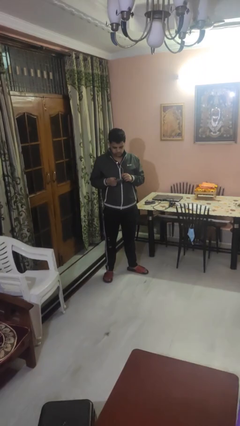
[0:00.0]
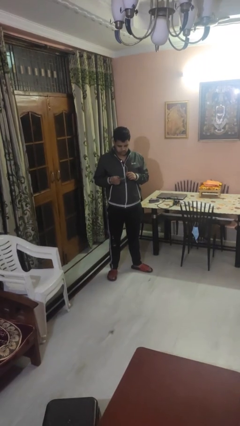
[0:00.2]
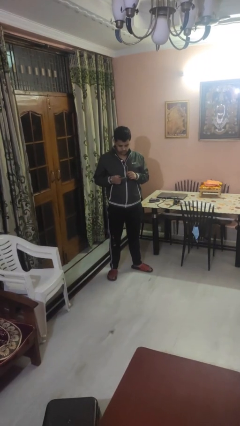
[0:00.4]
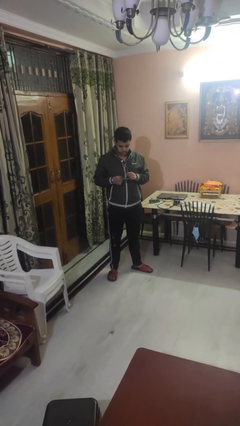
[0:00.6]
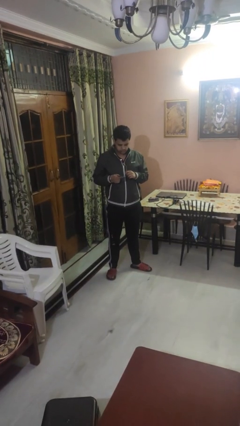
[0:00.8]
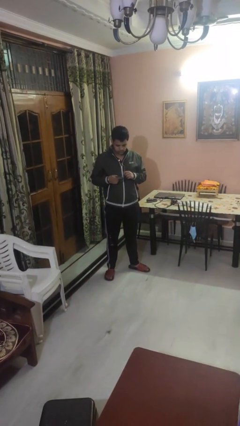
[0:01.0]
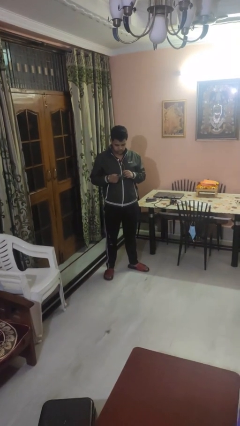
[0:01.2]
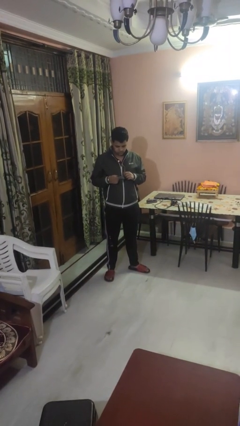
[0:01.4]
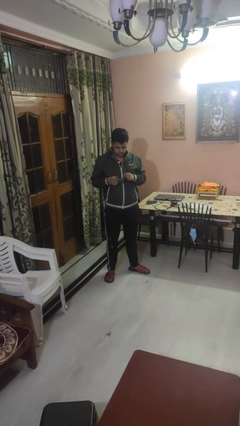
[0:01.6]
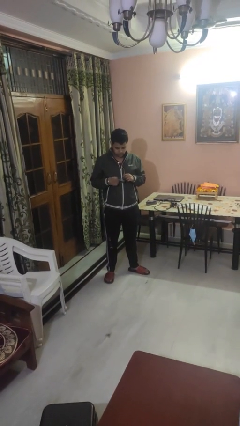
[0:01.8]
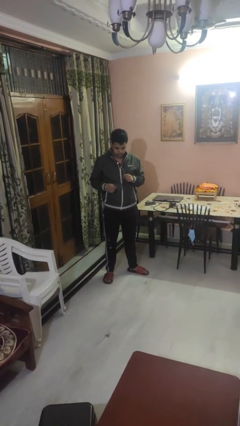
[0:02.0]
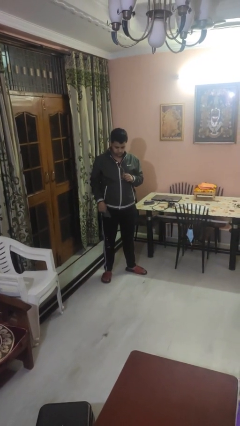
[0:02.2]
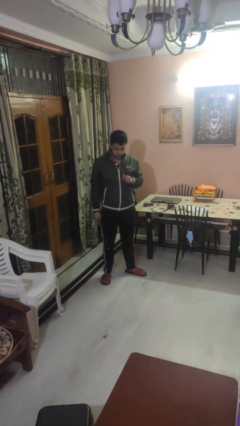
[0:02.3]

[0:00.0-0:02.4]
person cleans eyeglasses

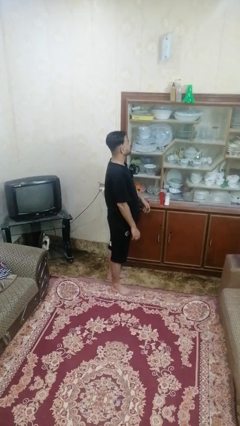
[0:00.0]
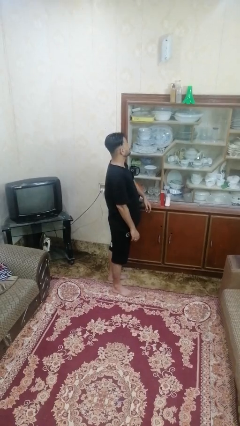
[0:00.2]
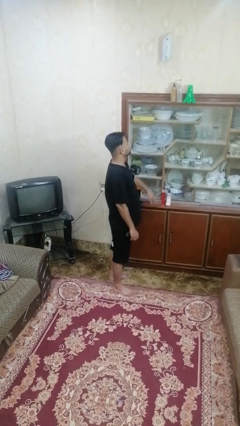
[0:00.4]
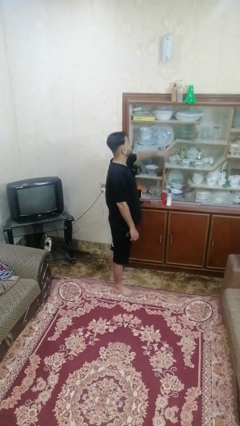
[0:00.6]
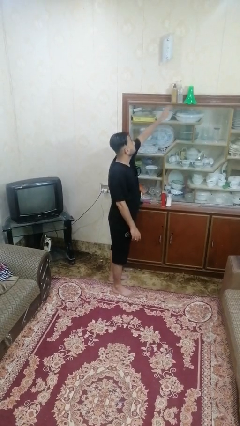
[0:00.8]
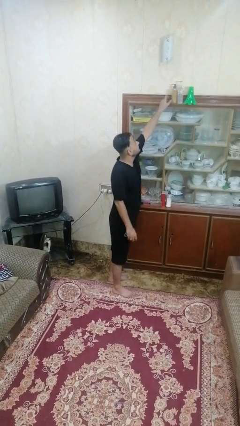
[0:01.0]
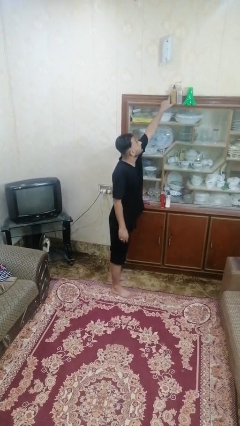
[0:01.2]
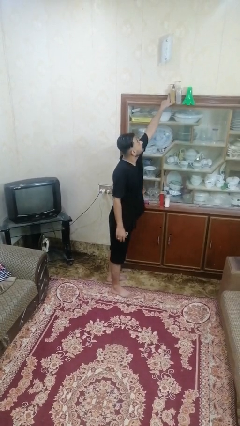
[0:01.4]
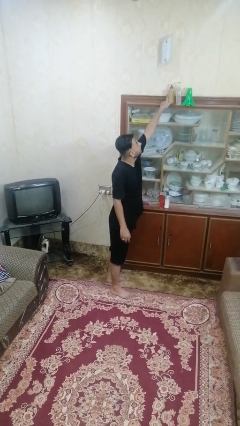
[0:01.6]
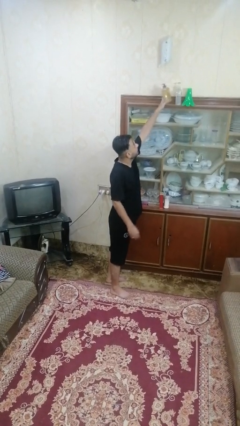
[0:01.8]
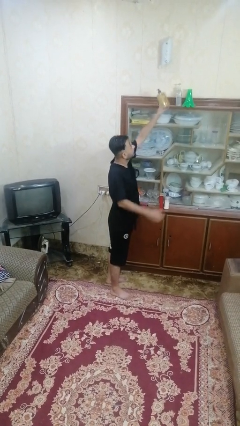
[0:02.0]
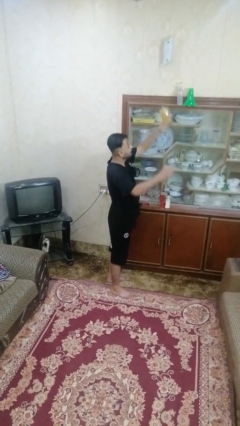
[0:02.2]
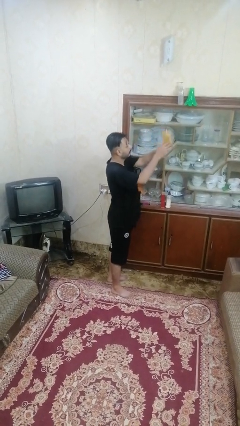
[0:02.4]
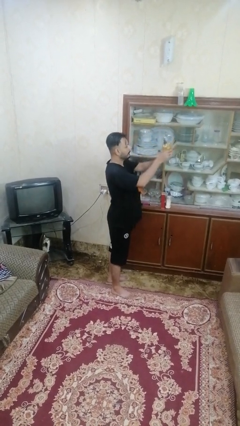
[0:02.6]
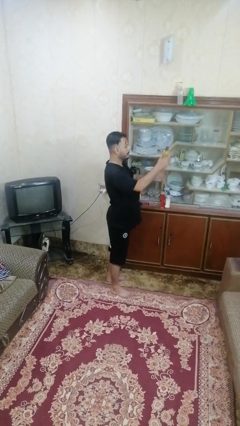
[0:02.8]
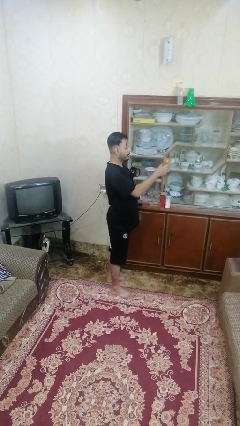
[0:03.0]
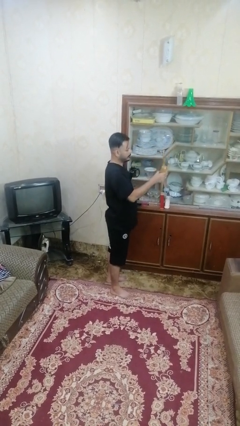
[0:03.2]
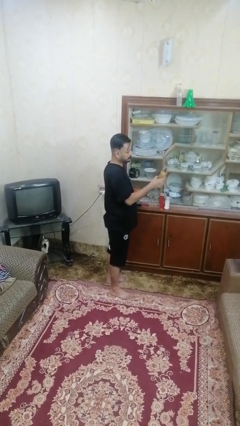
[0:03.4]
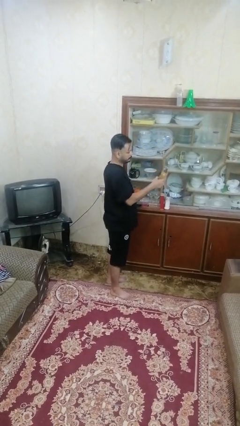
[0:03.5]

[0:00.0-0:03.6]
person picks up object from shelf

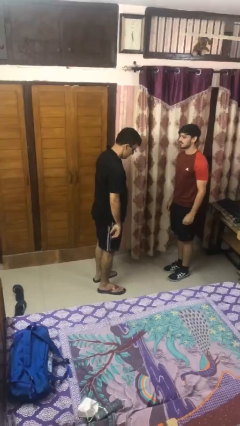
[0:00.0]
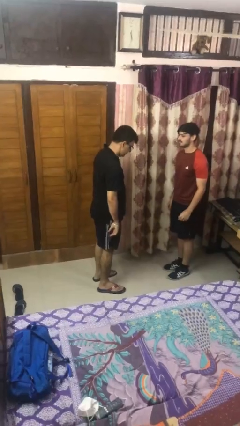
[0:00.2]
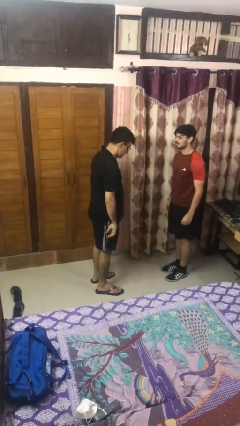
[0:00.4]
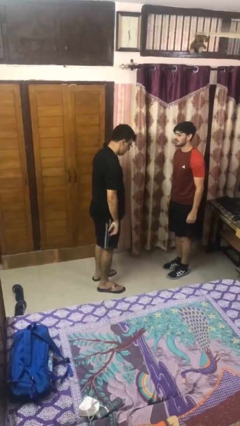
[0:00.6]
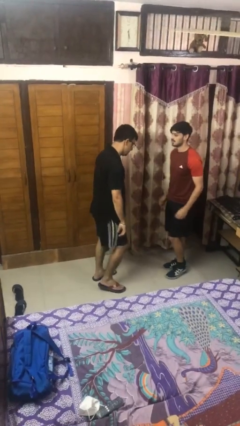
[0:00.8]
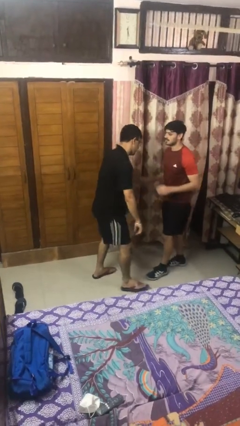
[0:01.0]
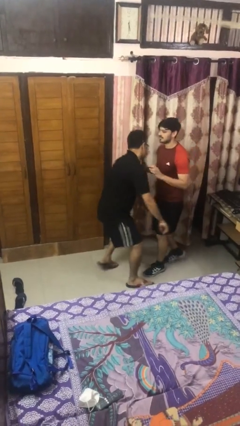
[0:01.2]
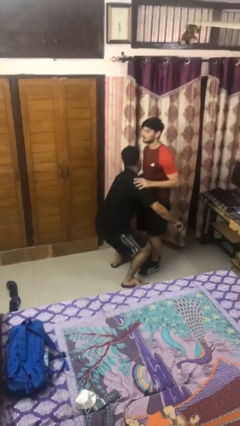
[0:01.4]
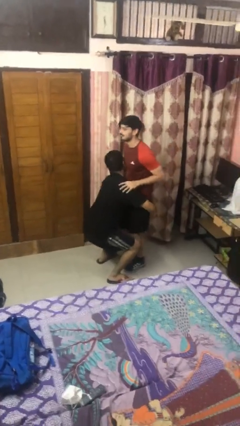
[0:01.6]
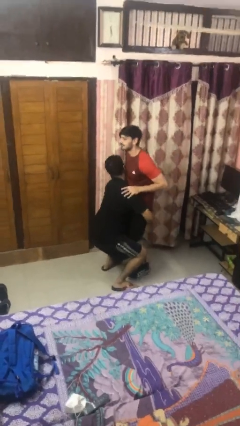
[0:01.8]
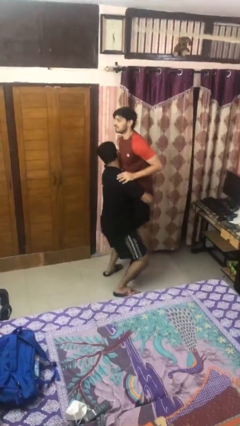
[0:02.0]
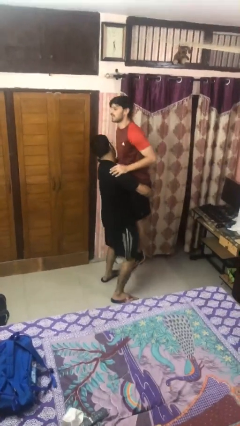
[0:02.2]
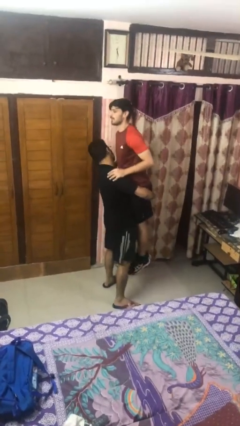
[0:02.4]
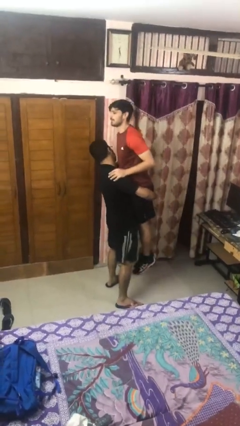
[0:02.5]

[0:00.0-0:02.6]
person picks up person

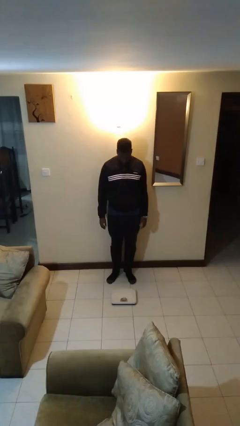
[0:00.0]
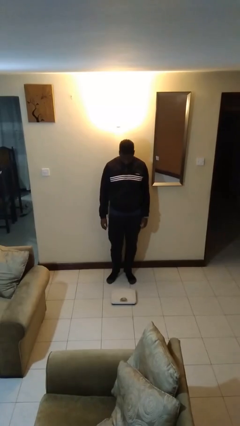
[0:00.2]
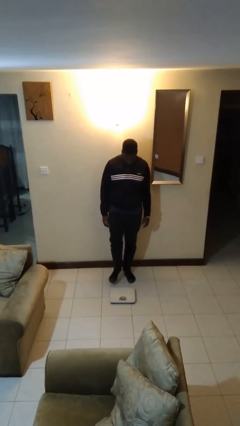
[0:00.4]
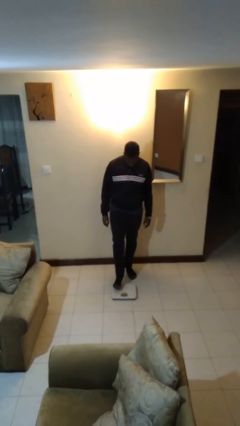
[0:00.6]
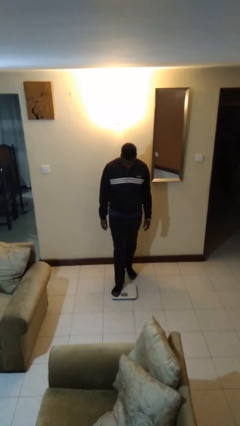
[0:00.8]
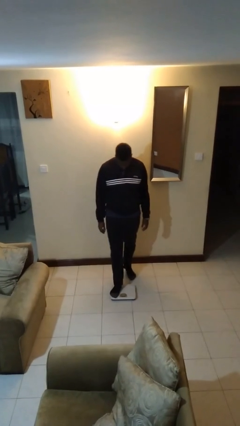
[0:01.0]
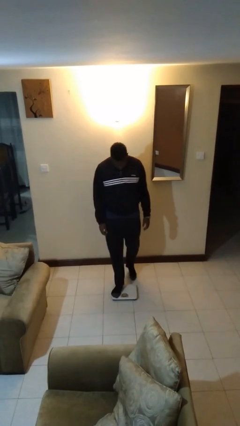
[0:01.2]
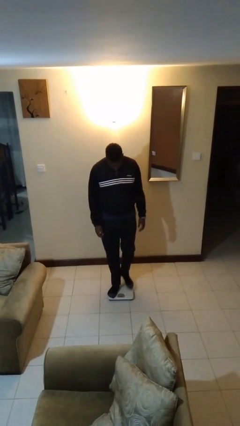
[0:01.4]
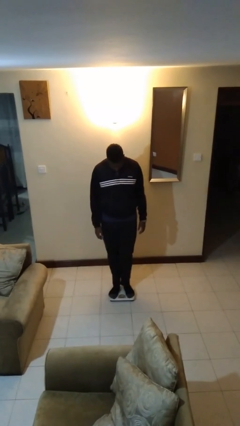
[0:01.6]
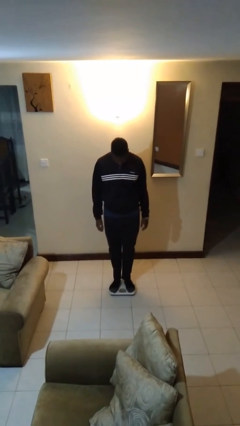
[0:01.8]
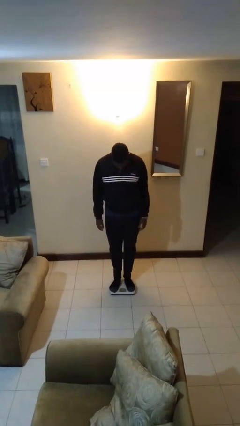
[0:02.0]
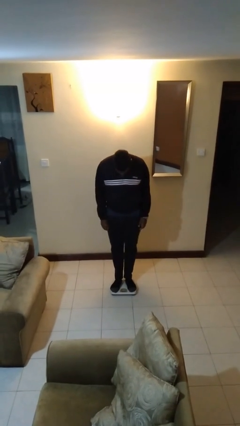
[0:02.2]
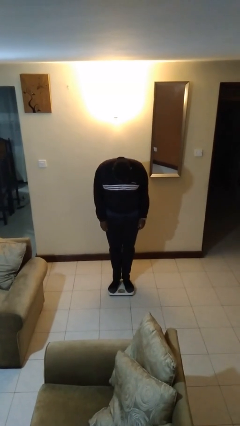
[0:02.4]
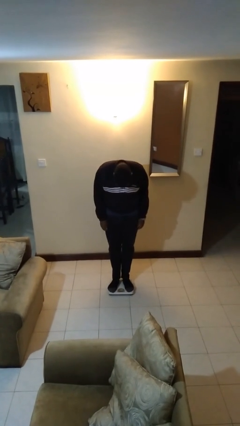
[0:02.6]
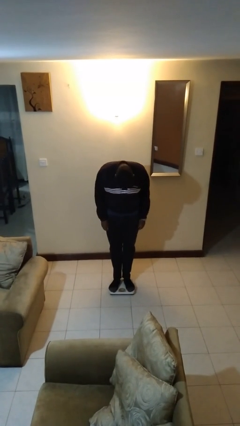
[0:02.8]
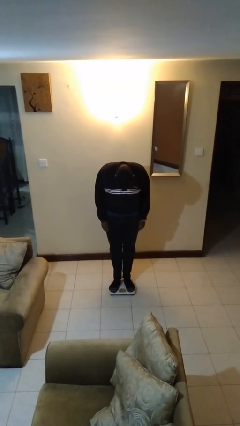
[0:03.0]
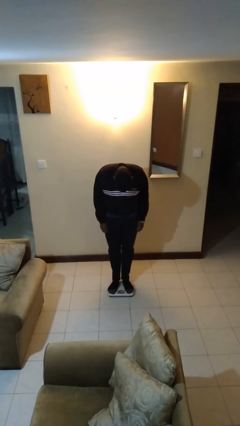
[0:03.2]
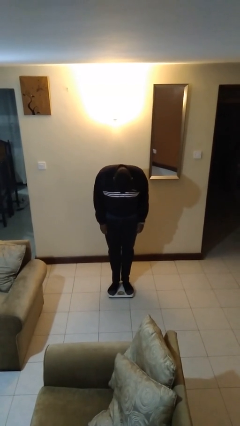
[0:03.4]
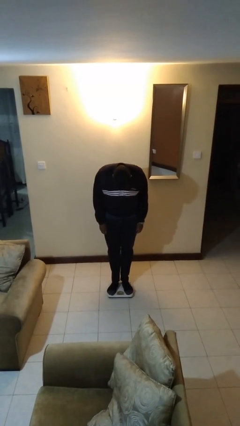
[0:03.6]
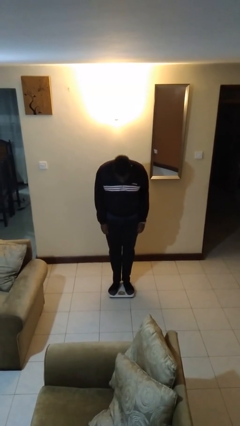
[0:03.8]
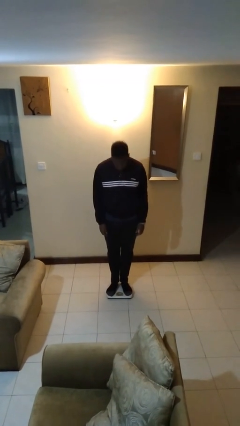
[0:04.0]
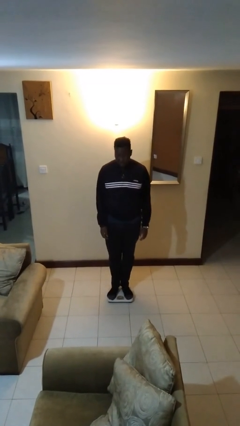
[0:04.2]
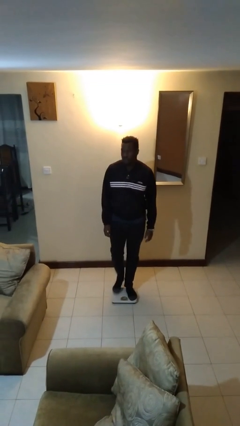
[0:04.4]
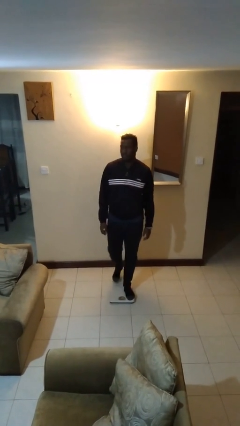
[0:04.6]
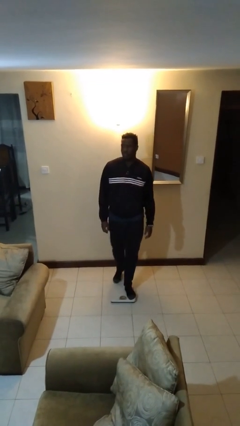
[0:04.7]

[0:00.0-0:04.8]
person uses bodyweight scale

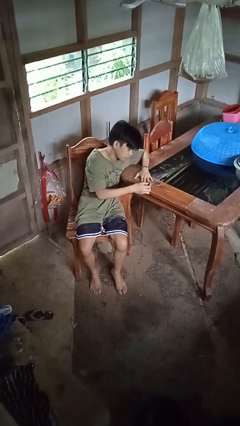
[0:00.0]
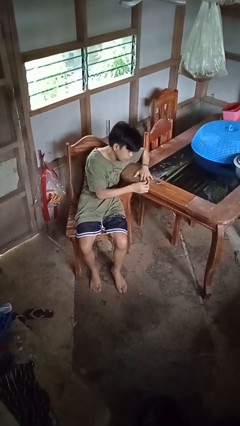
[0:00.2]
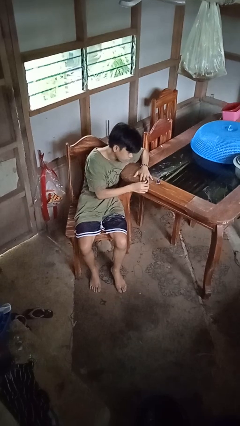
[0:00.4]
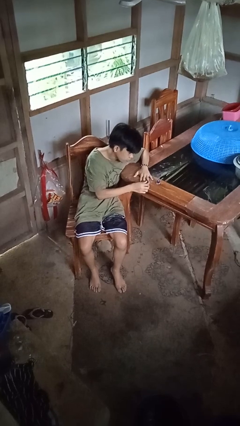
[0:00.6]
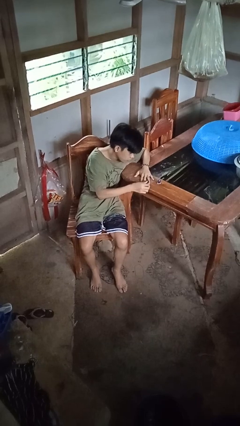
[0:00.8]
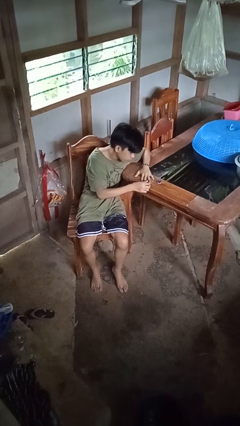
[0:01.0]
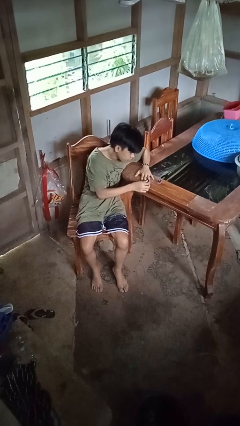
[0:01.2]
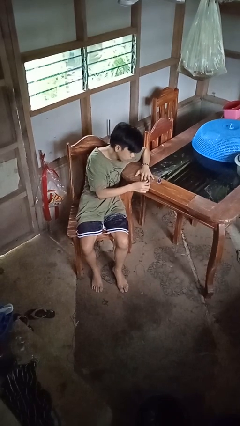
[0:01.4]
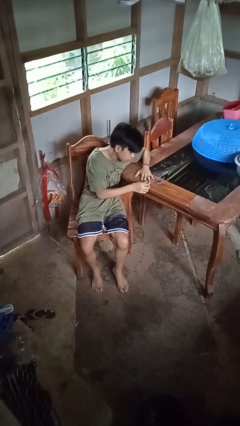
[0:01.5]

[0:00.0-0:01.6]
person paints fingernails

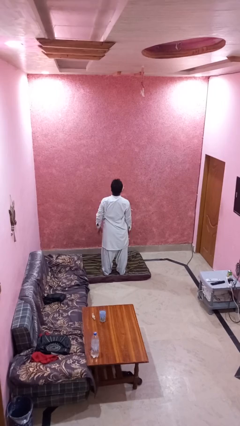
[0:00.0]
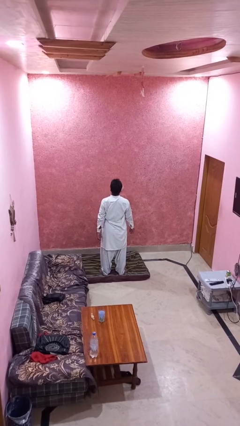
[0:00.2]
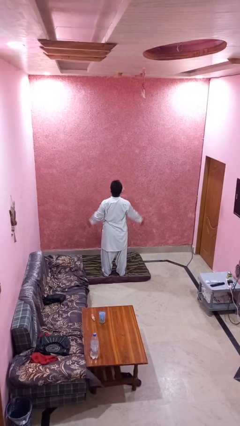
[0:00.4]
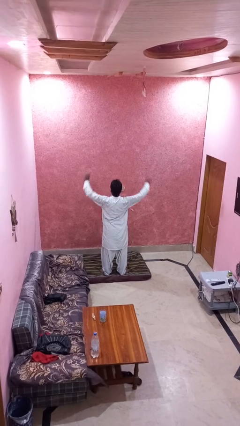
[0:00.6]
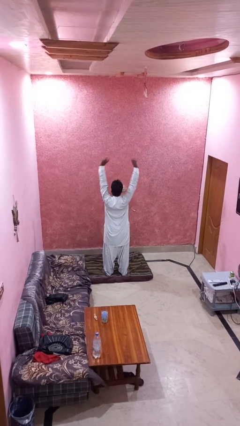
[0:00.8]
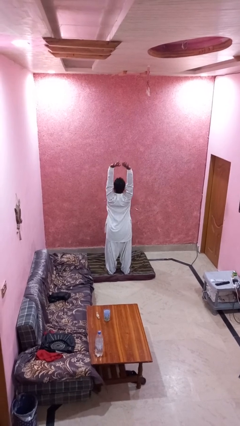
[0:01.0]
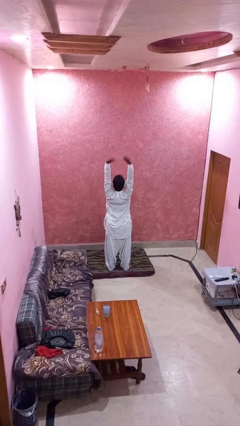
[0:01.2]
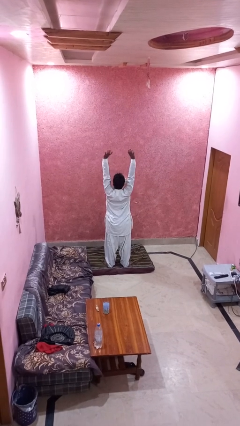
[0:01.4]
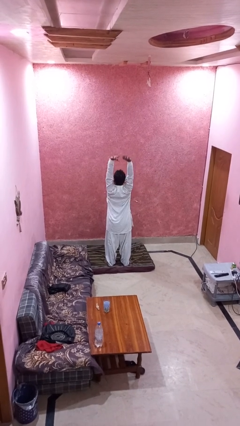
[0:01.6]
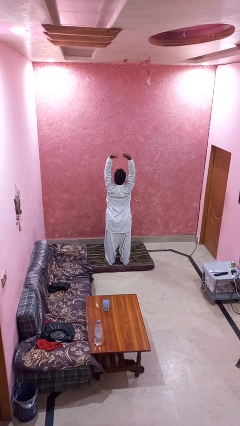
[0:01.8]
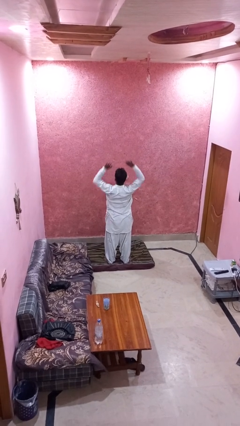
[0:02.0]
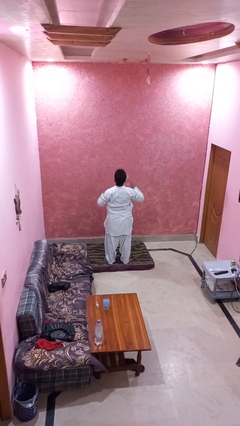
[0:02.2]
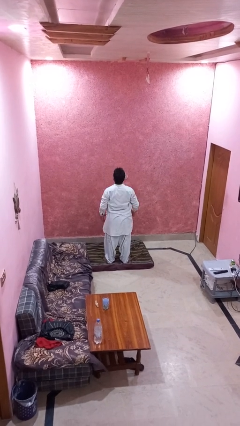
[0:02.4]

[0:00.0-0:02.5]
person stretches arms over head

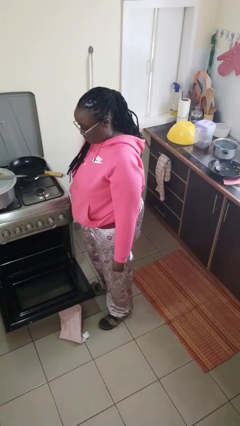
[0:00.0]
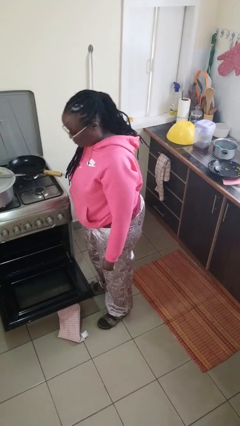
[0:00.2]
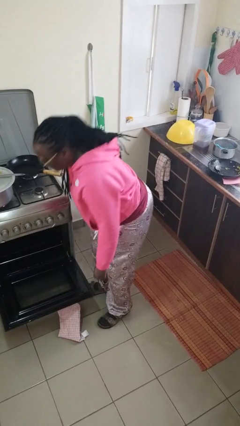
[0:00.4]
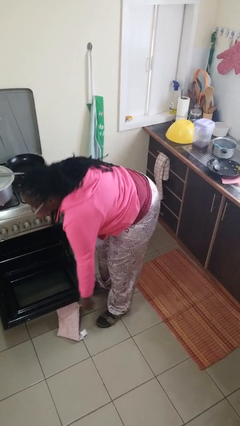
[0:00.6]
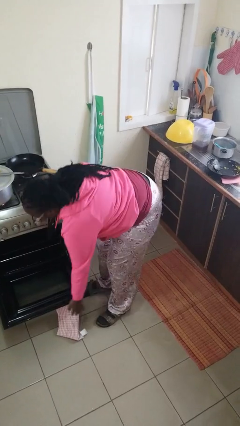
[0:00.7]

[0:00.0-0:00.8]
person closes oven door
